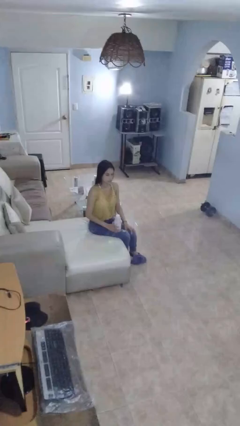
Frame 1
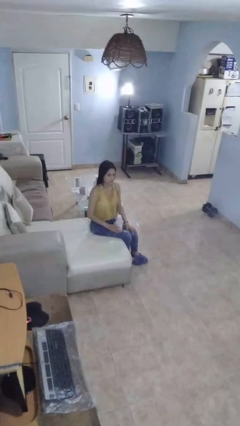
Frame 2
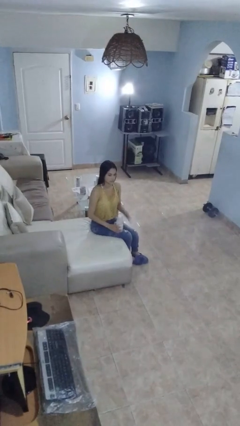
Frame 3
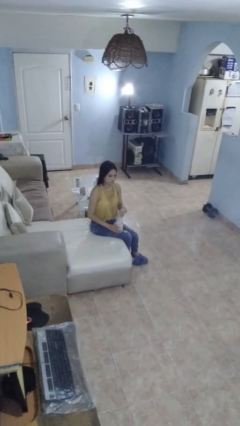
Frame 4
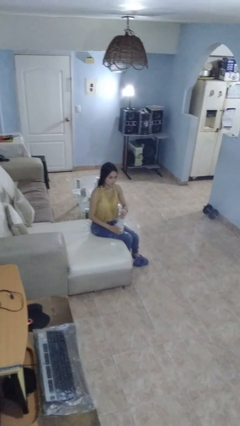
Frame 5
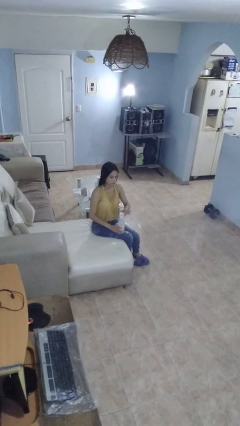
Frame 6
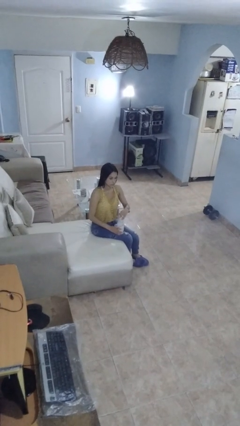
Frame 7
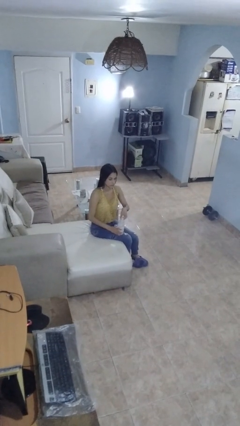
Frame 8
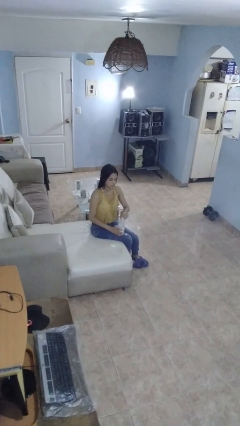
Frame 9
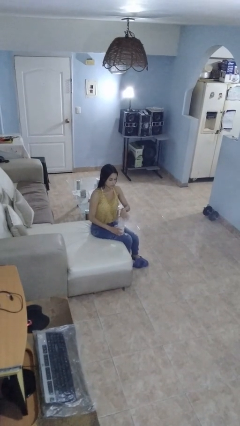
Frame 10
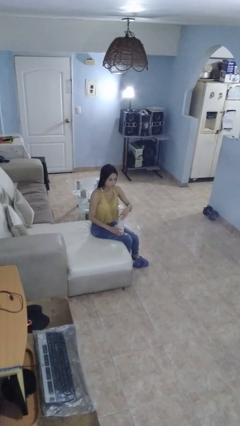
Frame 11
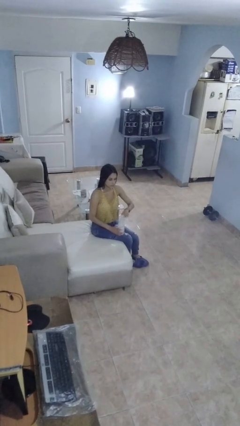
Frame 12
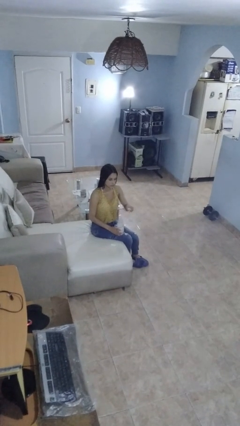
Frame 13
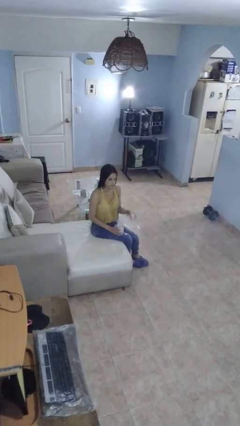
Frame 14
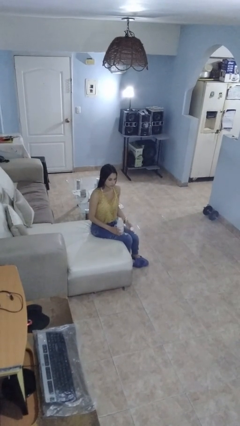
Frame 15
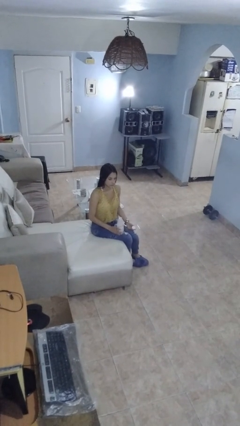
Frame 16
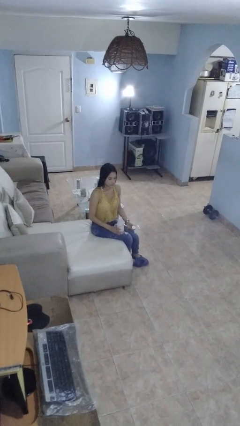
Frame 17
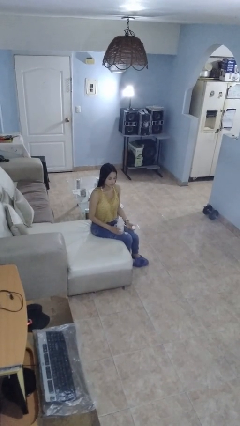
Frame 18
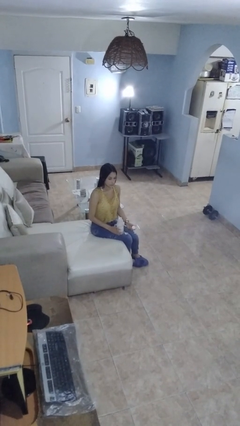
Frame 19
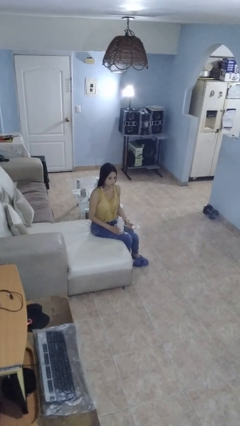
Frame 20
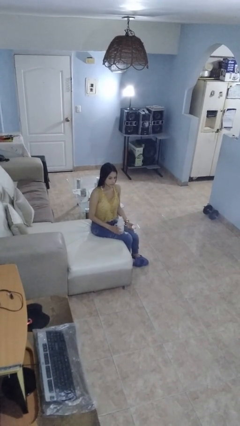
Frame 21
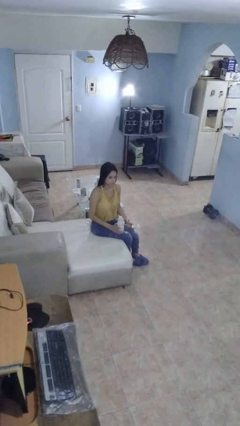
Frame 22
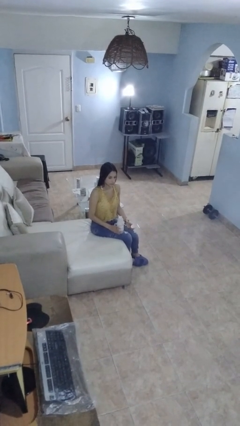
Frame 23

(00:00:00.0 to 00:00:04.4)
person unscrews lid from bottle

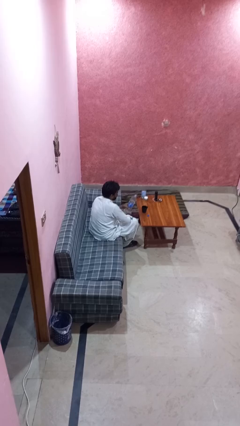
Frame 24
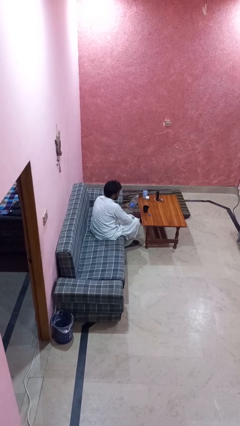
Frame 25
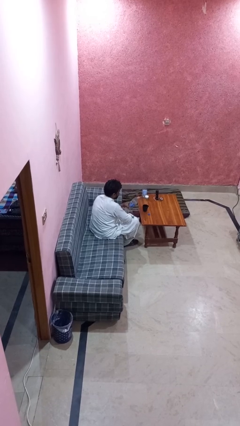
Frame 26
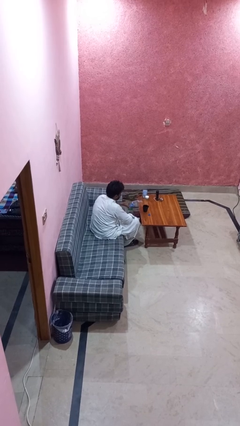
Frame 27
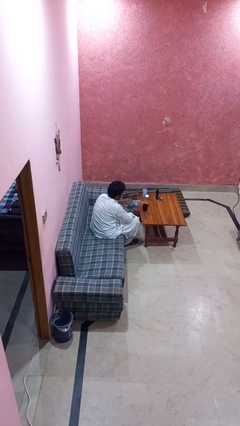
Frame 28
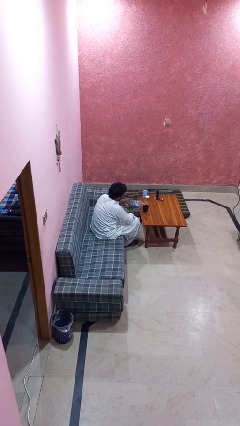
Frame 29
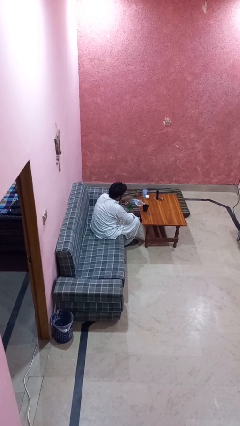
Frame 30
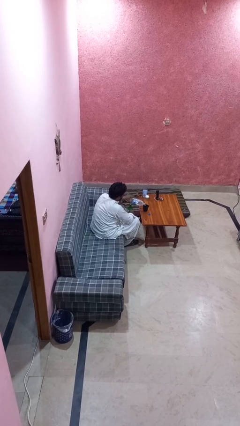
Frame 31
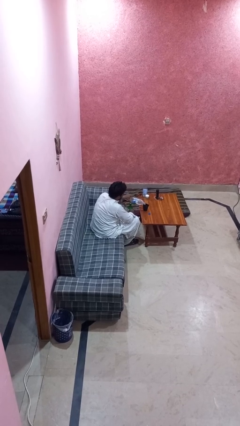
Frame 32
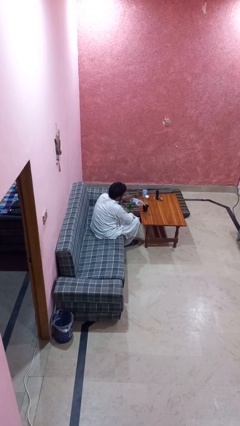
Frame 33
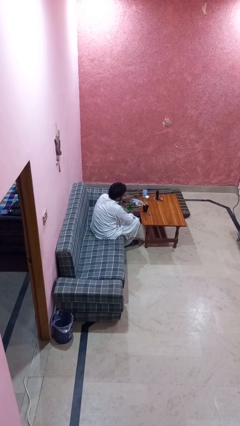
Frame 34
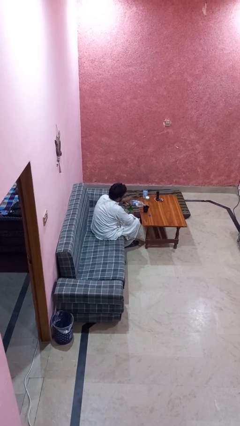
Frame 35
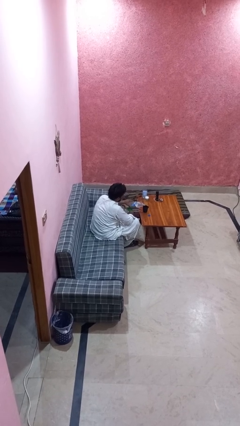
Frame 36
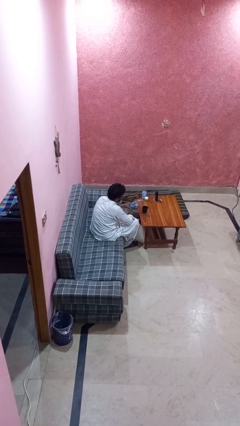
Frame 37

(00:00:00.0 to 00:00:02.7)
person pours liquid into cup

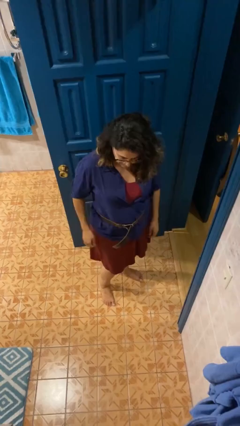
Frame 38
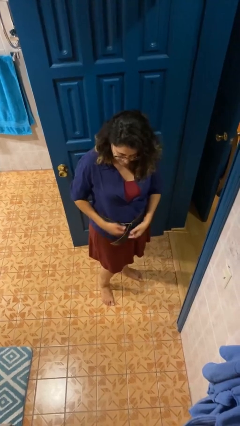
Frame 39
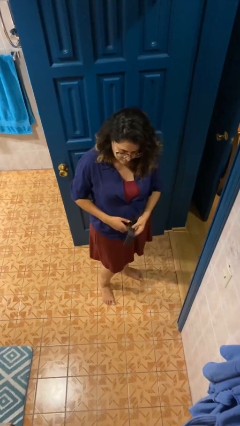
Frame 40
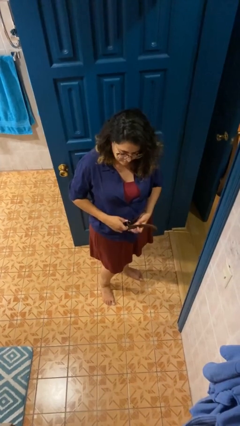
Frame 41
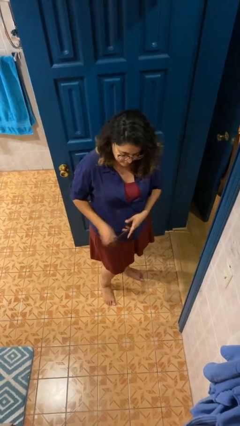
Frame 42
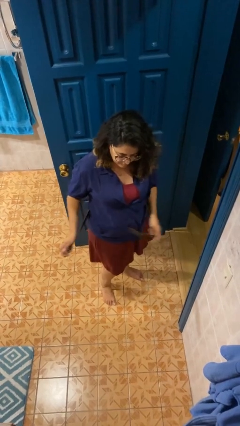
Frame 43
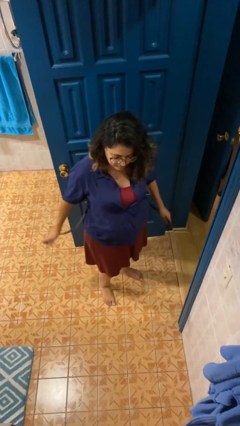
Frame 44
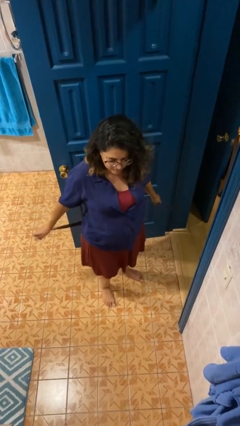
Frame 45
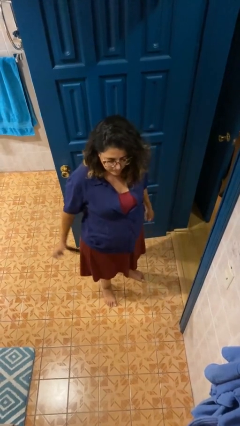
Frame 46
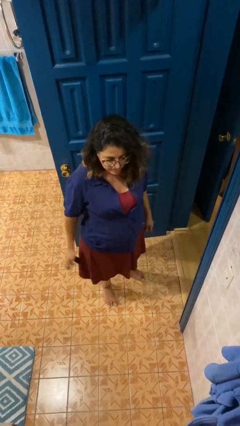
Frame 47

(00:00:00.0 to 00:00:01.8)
person takes off belt

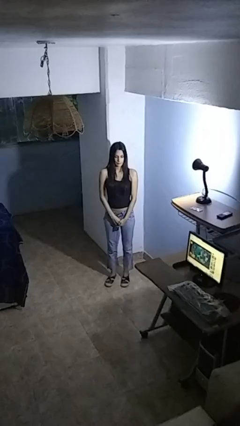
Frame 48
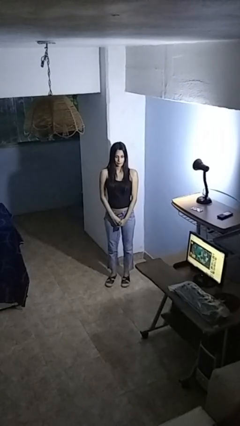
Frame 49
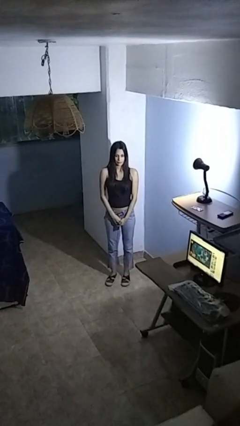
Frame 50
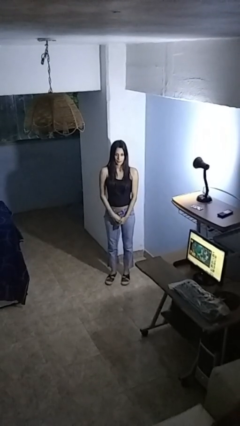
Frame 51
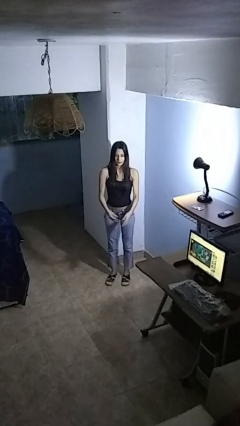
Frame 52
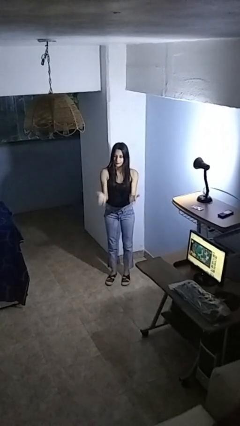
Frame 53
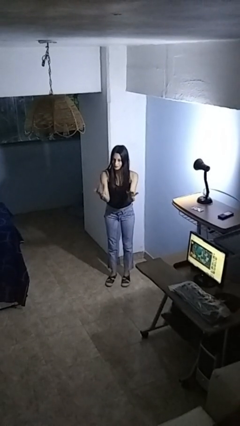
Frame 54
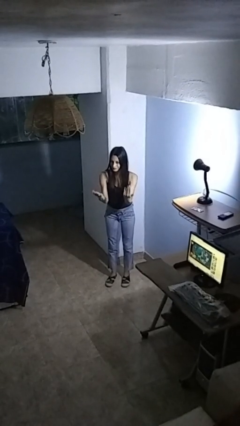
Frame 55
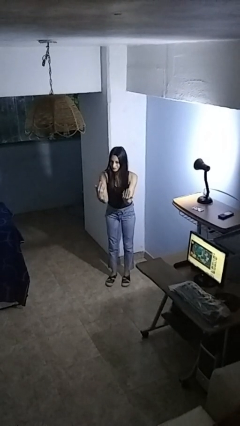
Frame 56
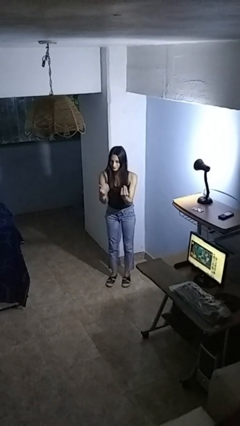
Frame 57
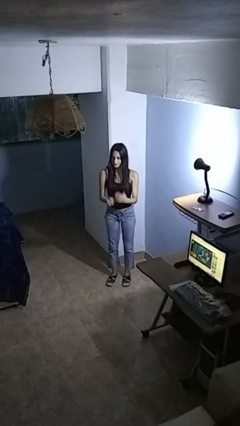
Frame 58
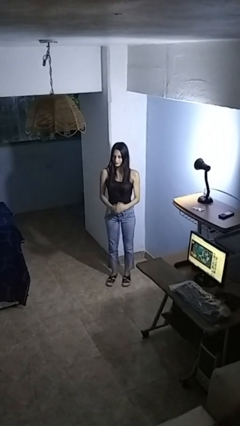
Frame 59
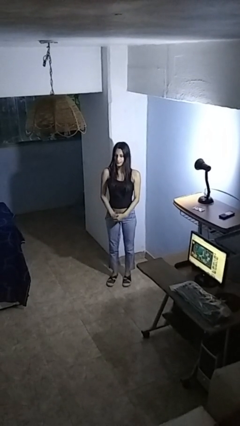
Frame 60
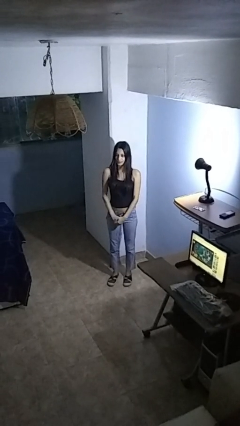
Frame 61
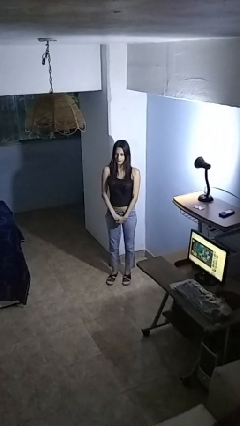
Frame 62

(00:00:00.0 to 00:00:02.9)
person gestures come here

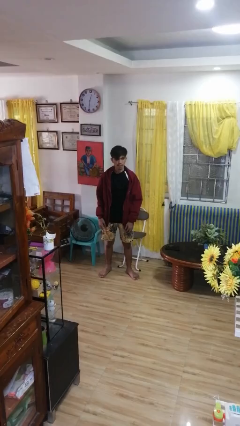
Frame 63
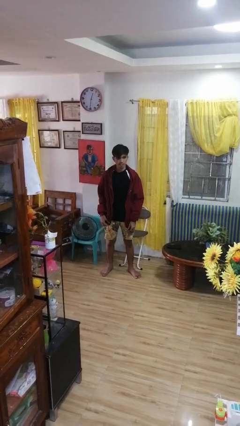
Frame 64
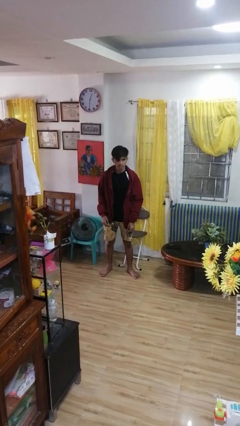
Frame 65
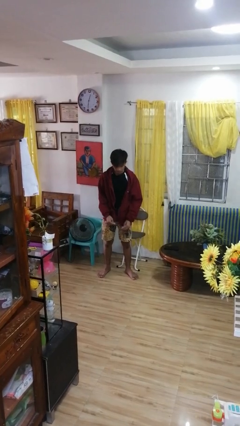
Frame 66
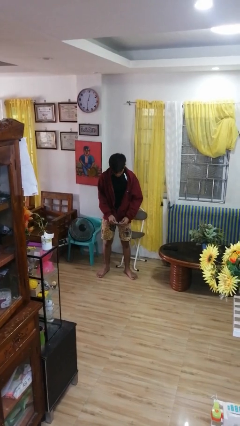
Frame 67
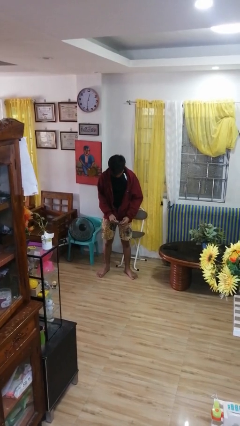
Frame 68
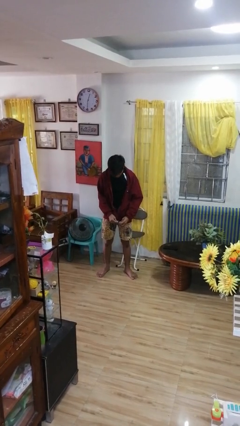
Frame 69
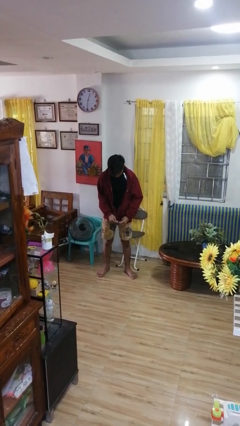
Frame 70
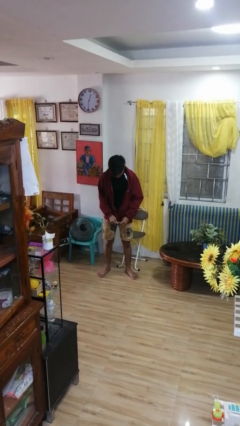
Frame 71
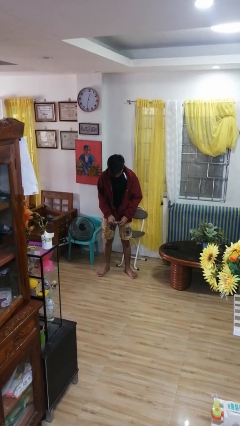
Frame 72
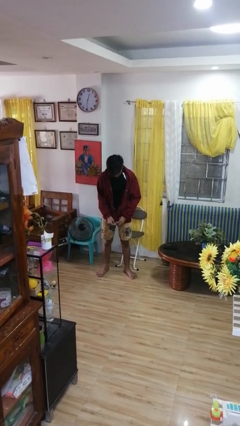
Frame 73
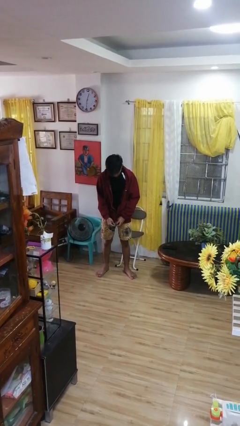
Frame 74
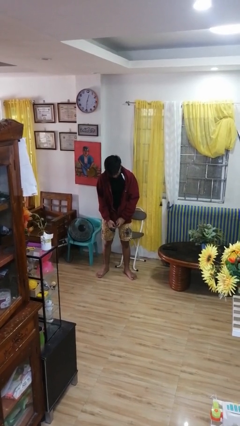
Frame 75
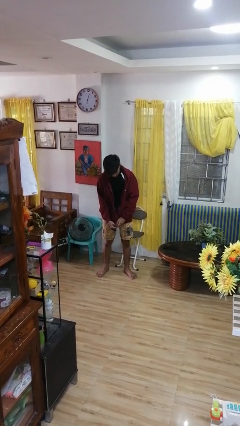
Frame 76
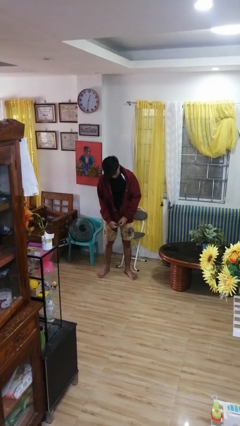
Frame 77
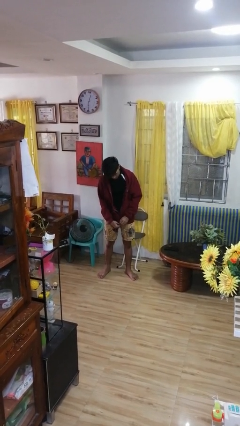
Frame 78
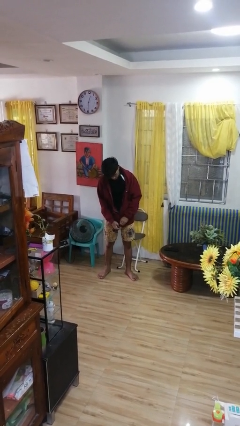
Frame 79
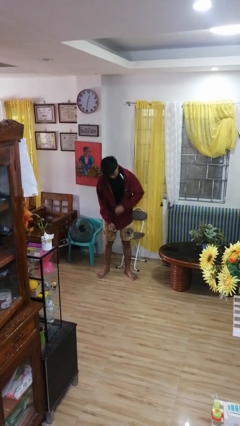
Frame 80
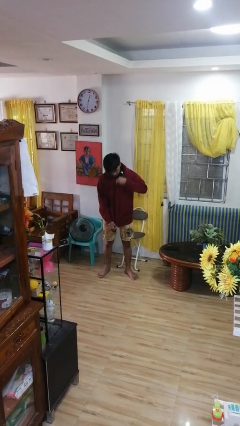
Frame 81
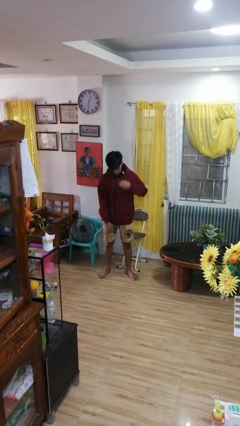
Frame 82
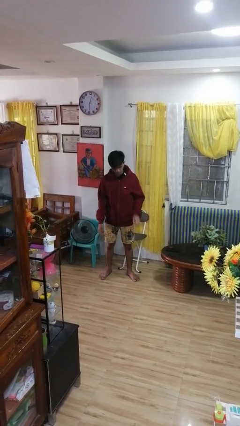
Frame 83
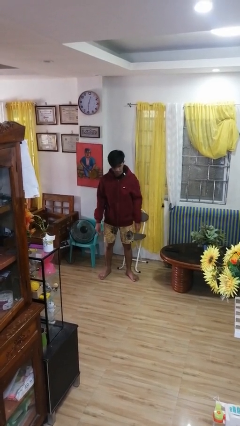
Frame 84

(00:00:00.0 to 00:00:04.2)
person zips up jacket

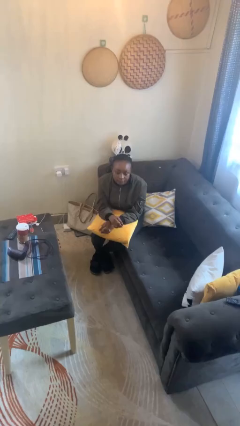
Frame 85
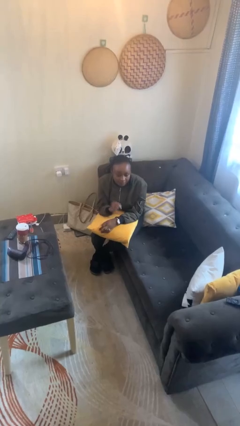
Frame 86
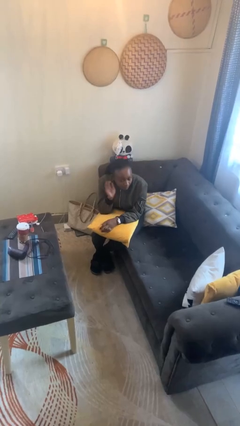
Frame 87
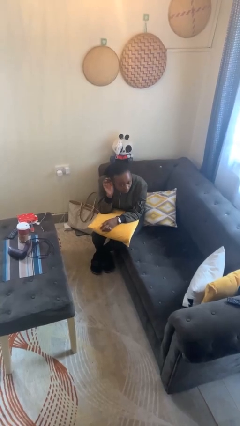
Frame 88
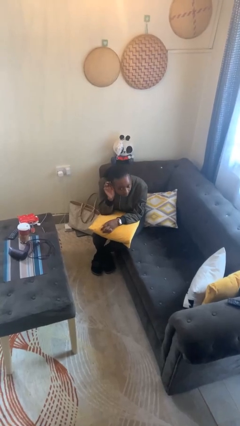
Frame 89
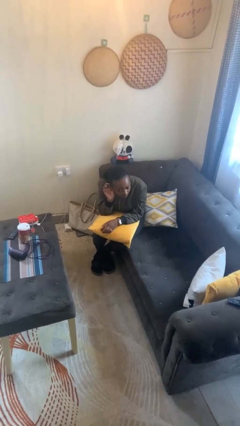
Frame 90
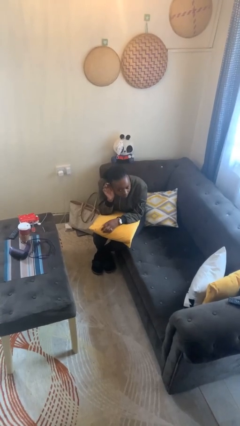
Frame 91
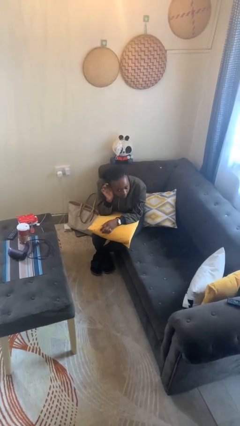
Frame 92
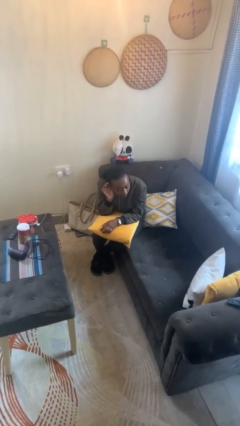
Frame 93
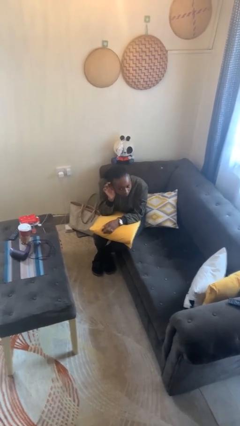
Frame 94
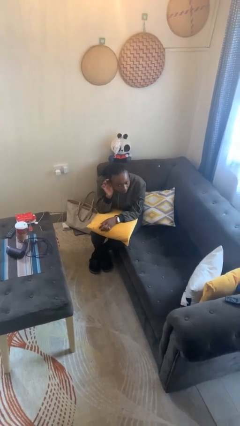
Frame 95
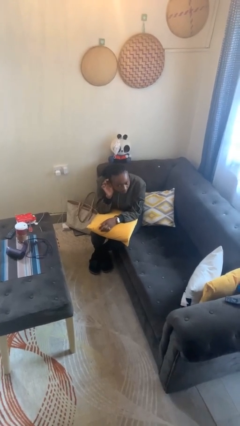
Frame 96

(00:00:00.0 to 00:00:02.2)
person gestures listen closely
